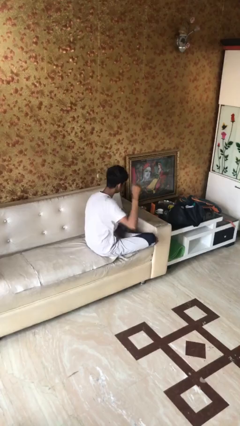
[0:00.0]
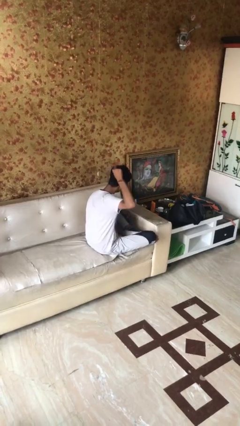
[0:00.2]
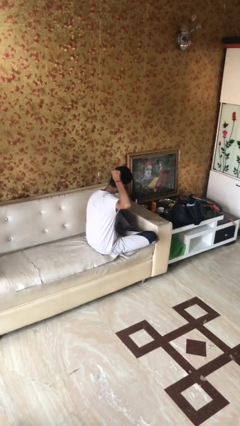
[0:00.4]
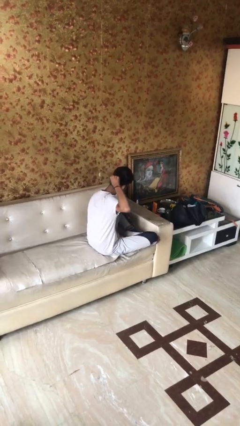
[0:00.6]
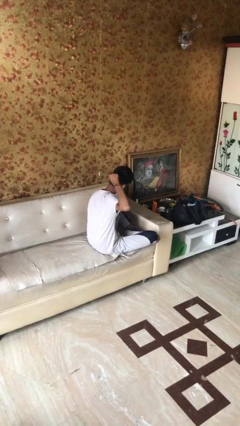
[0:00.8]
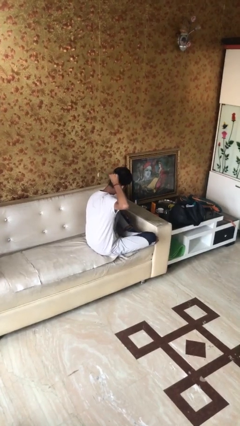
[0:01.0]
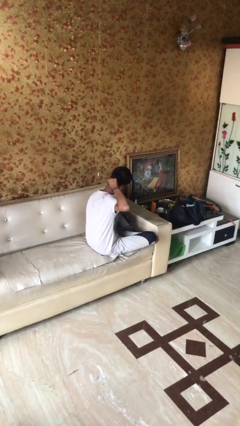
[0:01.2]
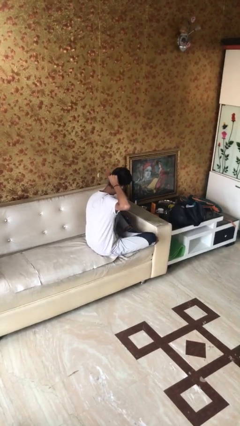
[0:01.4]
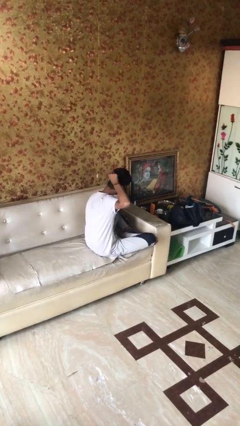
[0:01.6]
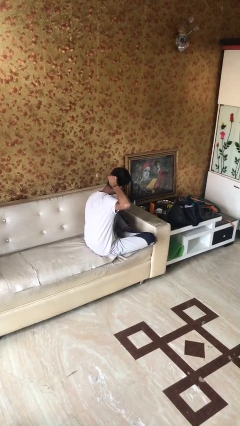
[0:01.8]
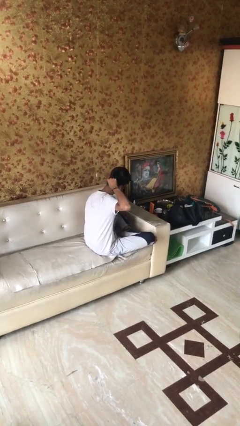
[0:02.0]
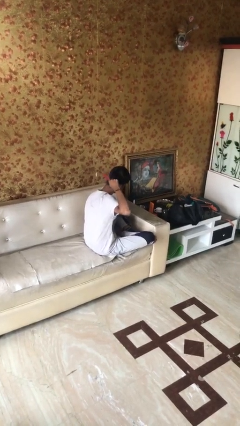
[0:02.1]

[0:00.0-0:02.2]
person brushes hair

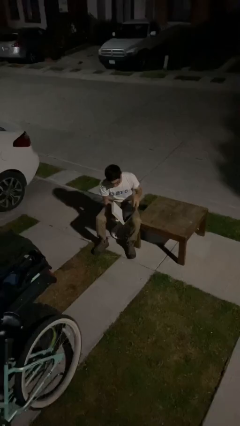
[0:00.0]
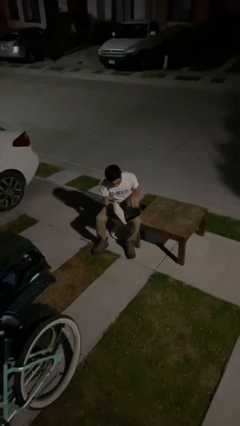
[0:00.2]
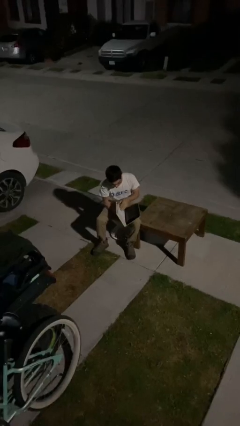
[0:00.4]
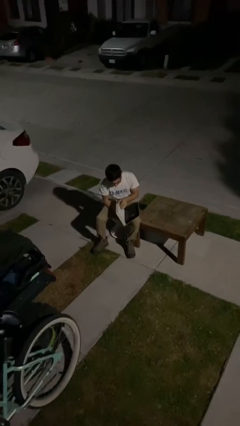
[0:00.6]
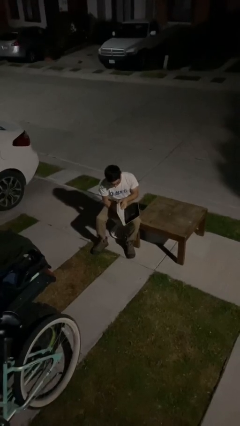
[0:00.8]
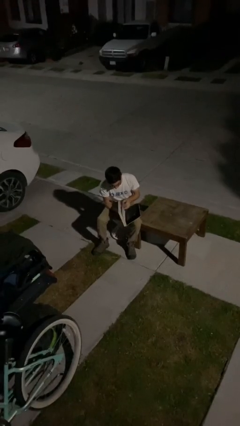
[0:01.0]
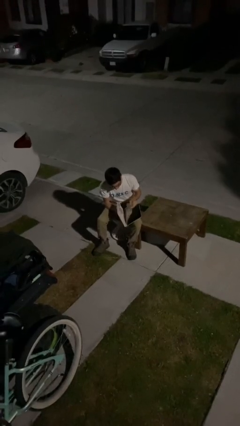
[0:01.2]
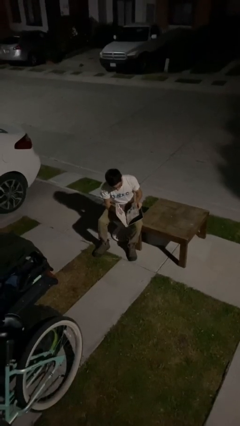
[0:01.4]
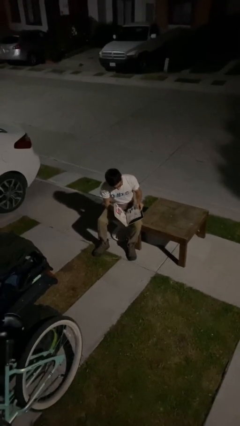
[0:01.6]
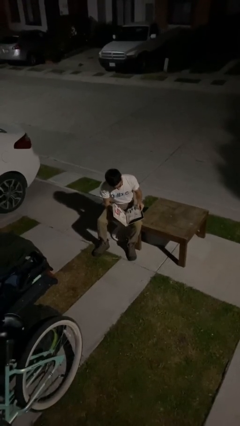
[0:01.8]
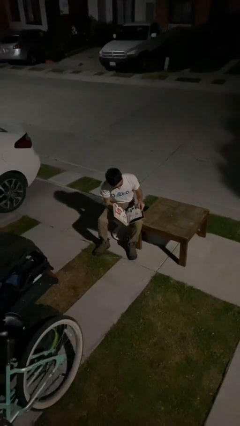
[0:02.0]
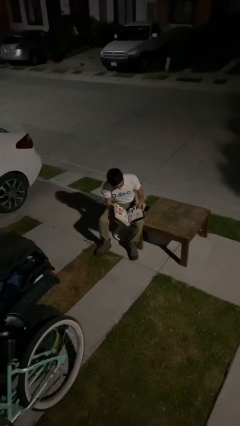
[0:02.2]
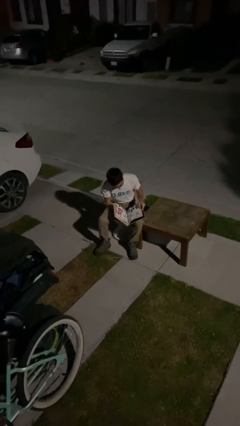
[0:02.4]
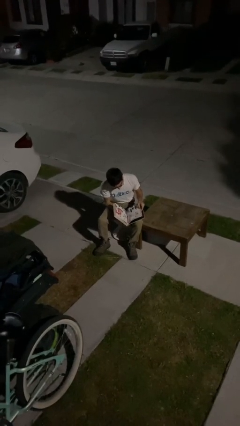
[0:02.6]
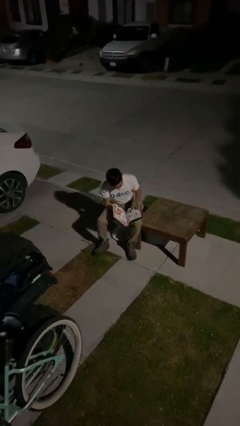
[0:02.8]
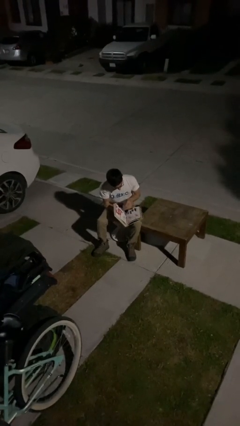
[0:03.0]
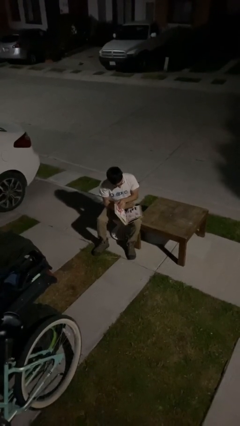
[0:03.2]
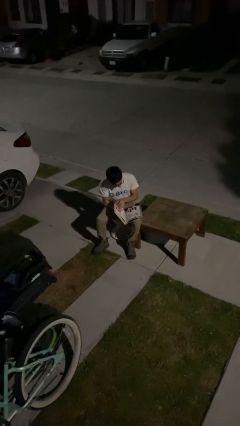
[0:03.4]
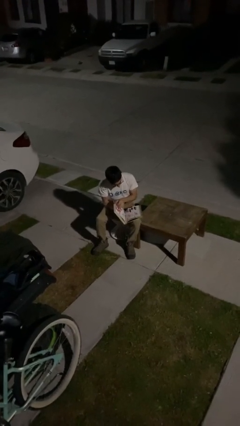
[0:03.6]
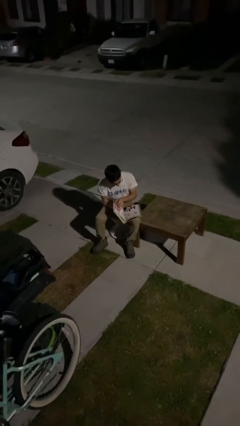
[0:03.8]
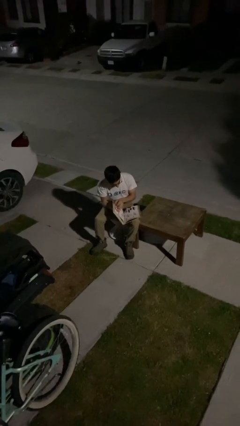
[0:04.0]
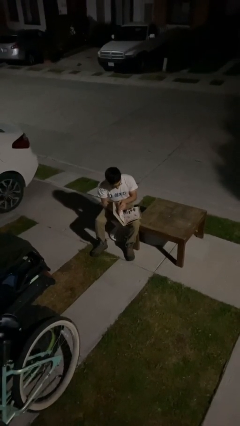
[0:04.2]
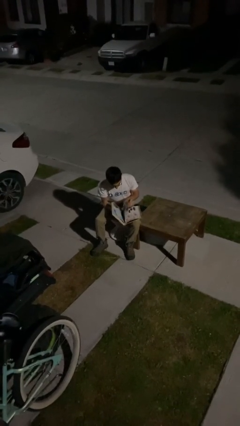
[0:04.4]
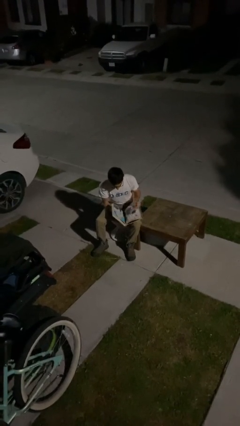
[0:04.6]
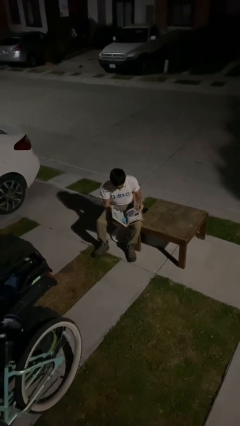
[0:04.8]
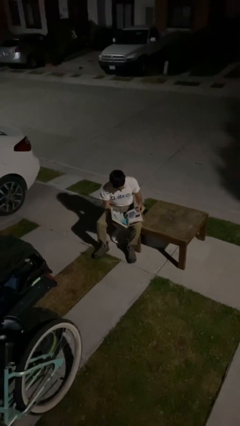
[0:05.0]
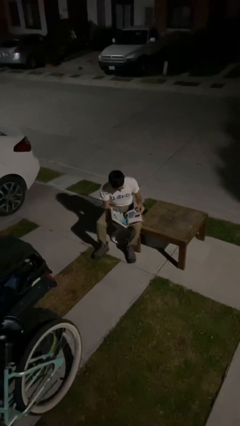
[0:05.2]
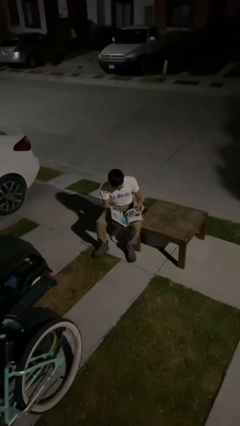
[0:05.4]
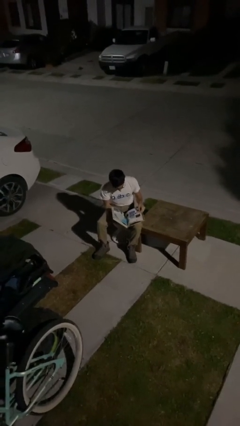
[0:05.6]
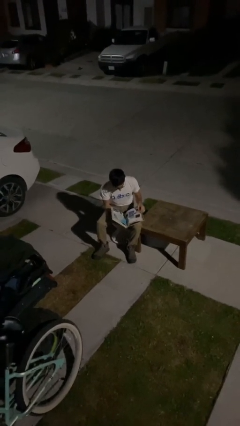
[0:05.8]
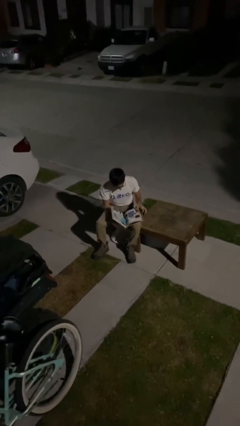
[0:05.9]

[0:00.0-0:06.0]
person reads document

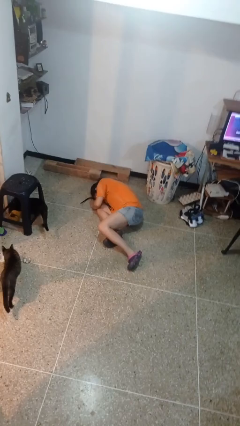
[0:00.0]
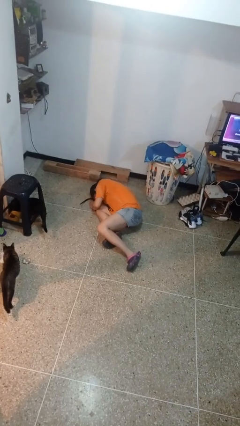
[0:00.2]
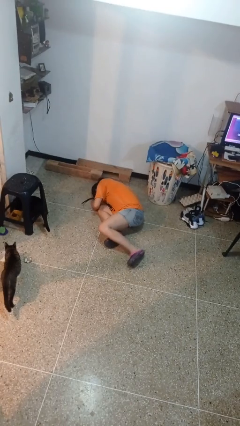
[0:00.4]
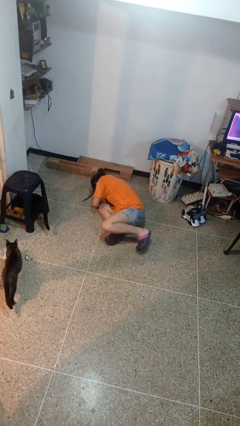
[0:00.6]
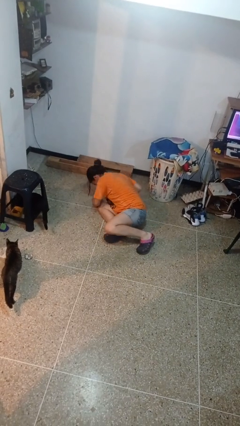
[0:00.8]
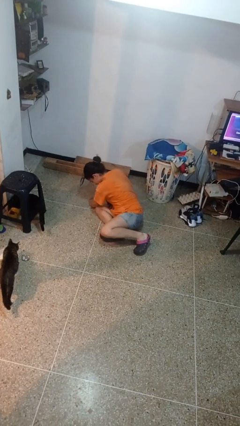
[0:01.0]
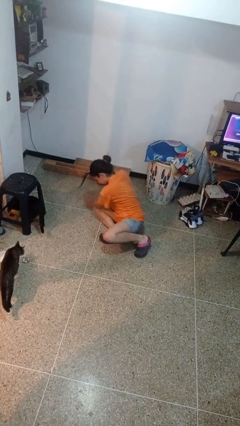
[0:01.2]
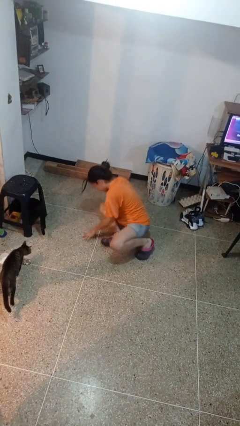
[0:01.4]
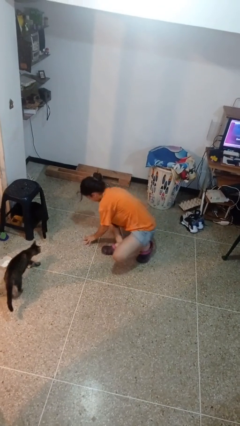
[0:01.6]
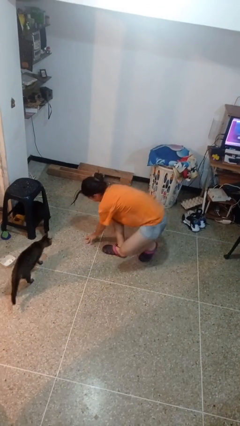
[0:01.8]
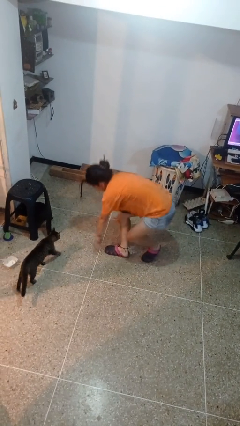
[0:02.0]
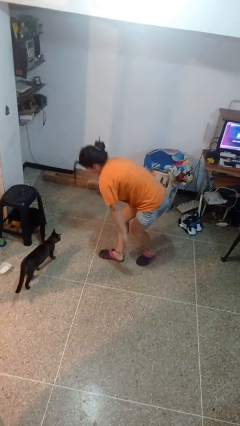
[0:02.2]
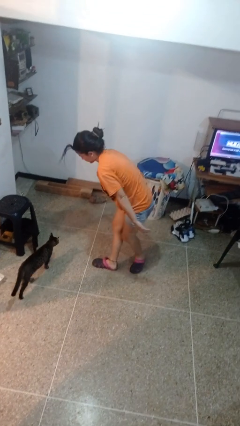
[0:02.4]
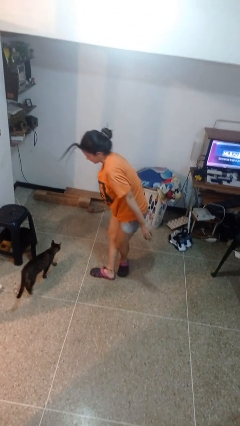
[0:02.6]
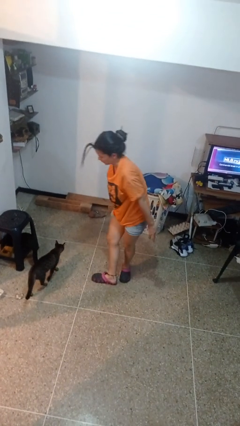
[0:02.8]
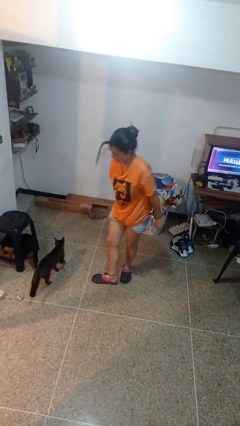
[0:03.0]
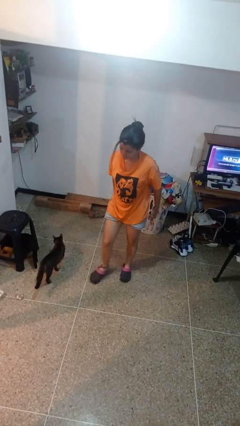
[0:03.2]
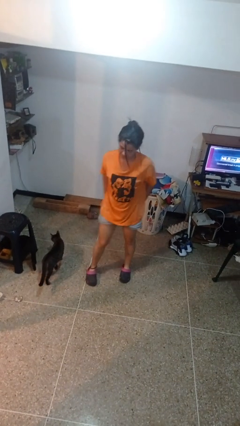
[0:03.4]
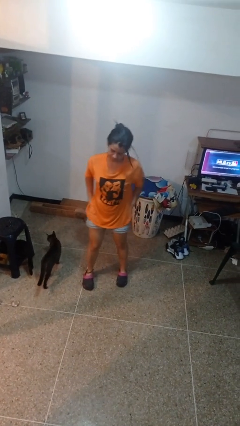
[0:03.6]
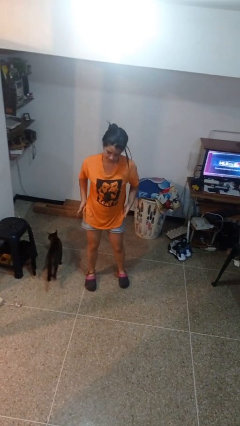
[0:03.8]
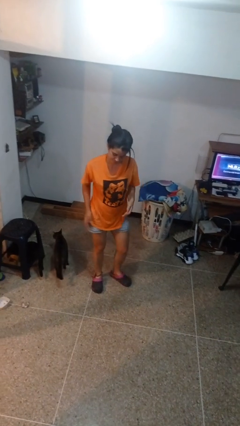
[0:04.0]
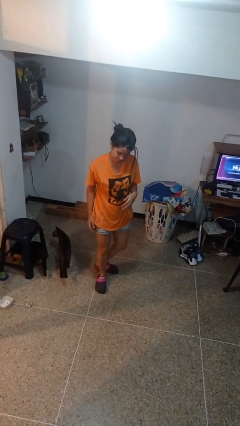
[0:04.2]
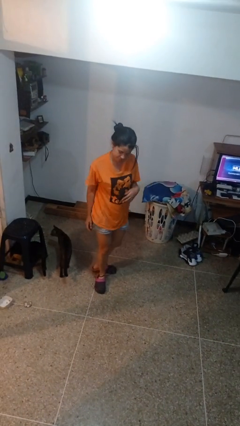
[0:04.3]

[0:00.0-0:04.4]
person stands up from floor

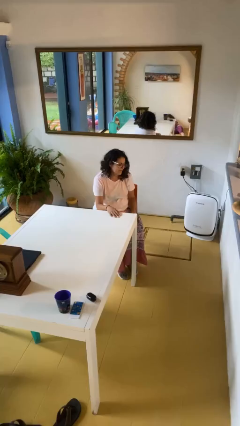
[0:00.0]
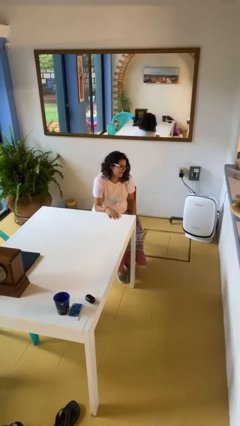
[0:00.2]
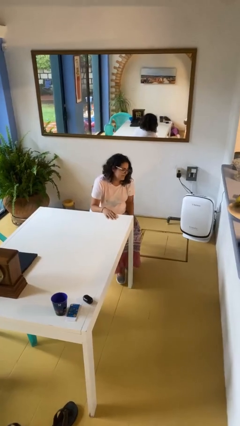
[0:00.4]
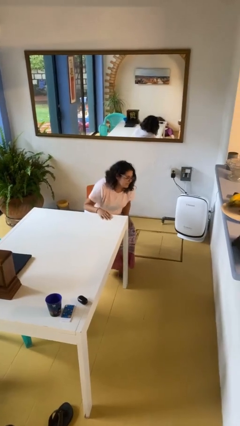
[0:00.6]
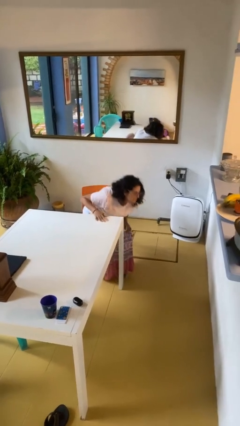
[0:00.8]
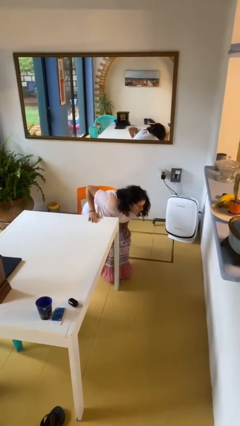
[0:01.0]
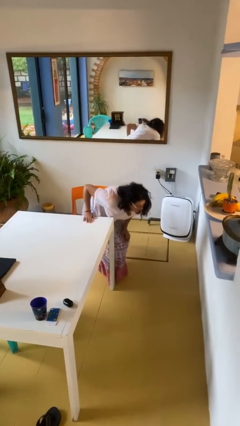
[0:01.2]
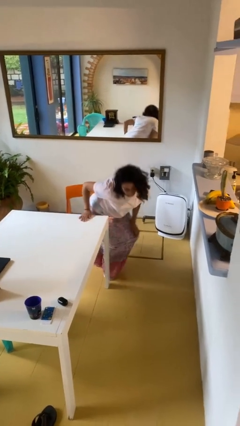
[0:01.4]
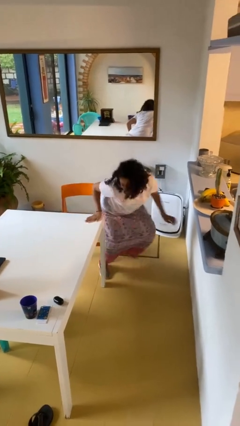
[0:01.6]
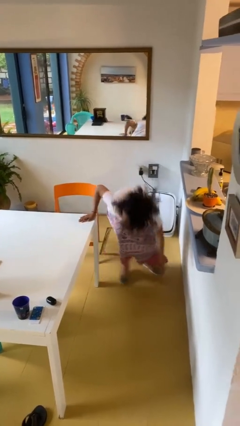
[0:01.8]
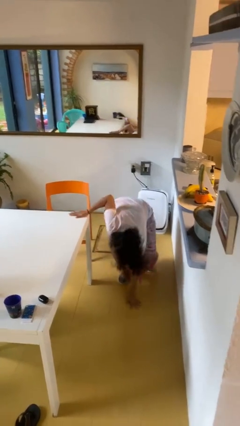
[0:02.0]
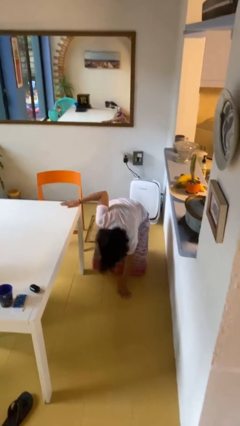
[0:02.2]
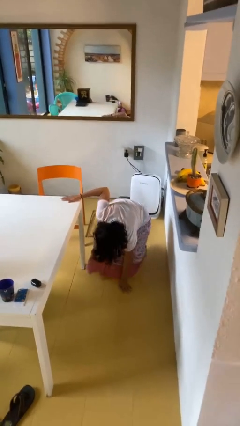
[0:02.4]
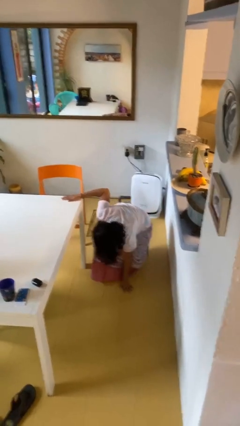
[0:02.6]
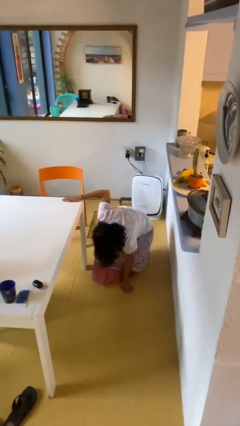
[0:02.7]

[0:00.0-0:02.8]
person falls from chair

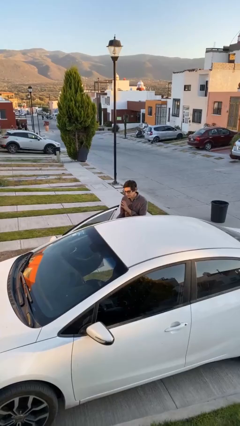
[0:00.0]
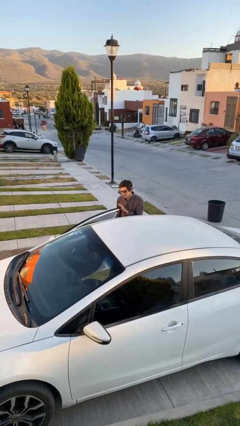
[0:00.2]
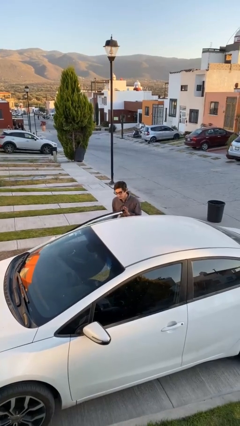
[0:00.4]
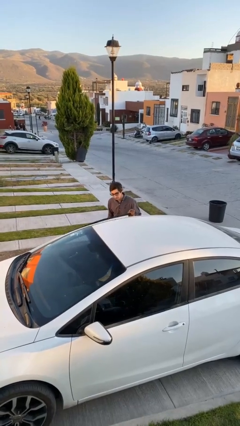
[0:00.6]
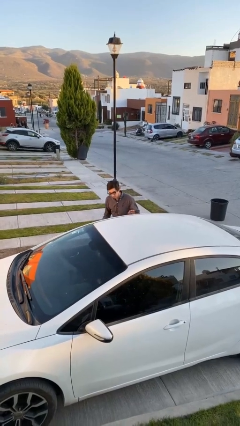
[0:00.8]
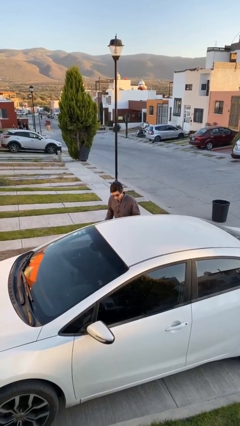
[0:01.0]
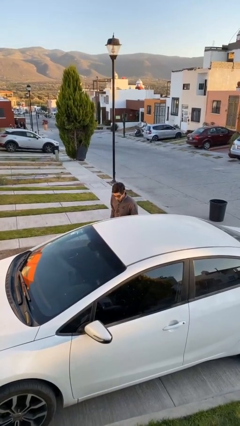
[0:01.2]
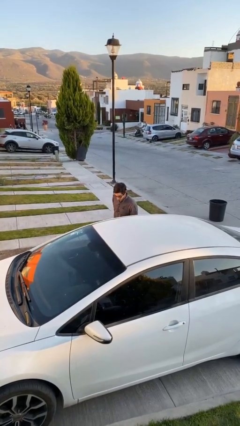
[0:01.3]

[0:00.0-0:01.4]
person closes car door
